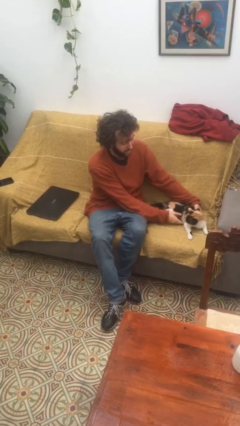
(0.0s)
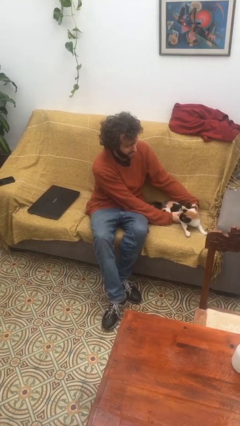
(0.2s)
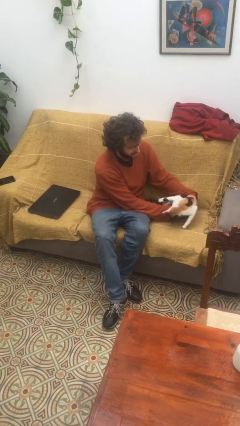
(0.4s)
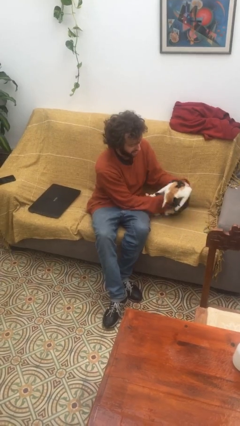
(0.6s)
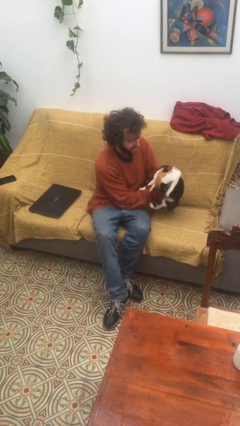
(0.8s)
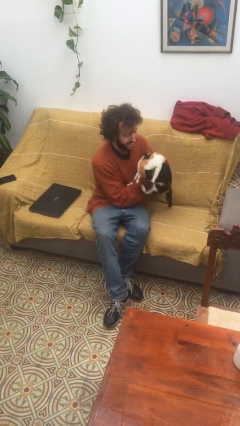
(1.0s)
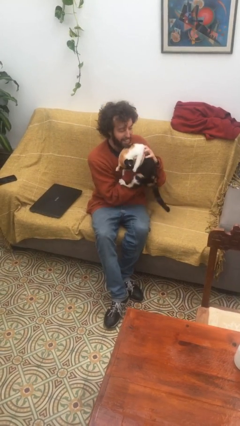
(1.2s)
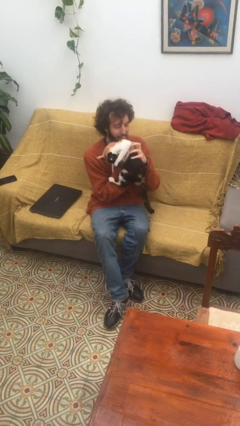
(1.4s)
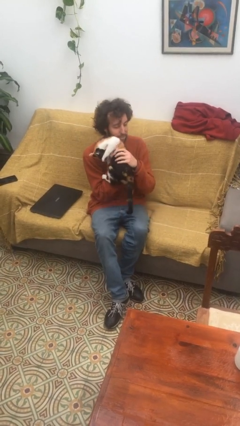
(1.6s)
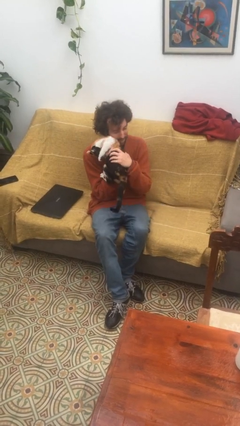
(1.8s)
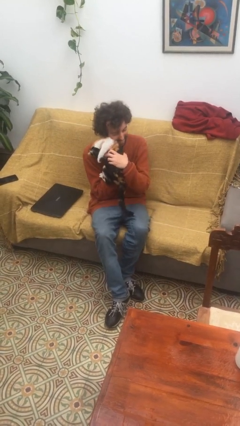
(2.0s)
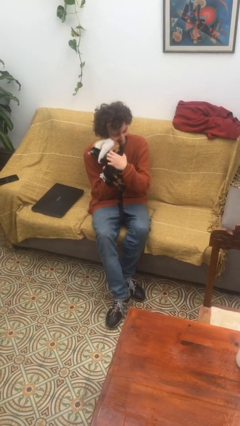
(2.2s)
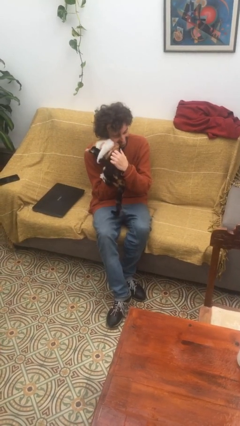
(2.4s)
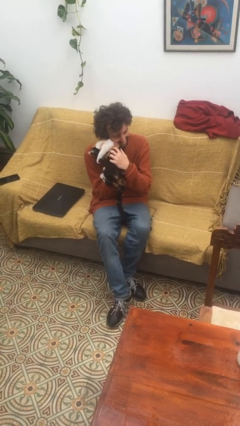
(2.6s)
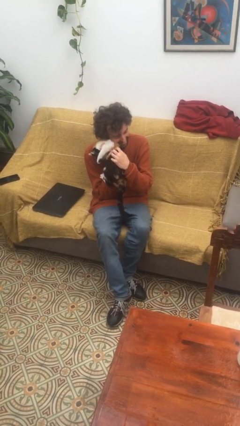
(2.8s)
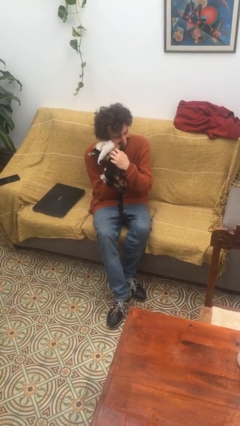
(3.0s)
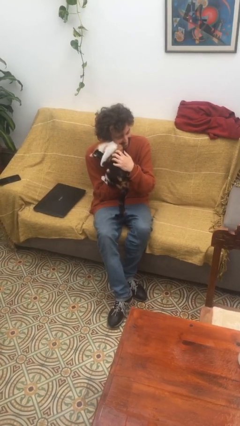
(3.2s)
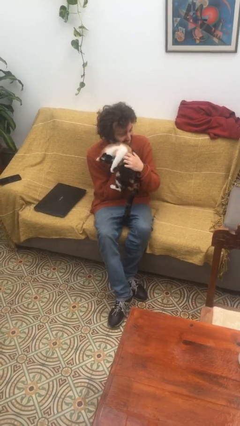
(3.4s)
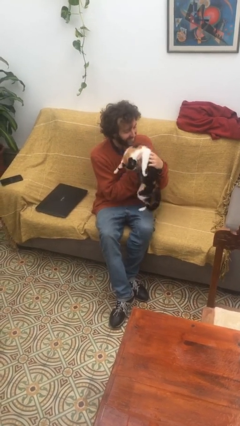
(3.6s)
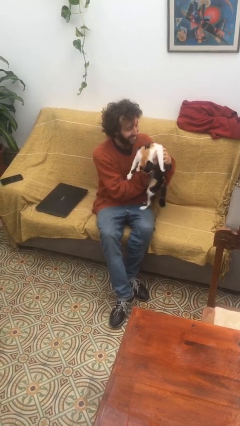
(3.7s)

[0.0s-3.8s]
person hugs cat

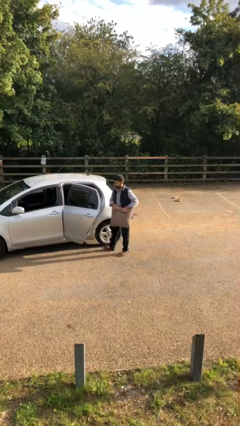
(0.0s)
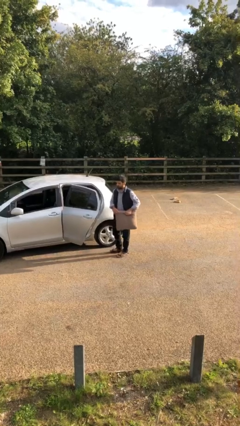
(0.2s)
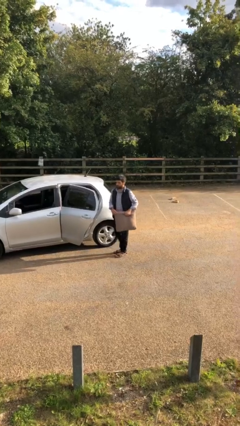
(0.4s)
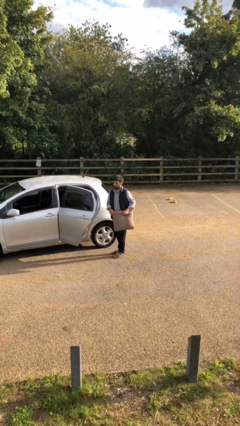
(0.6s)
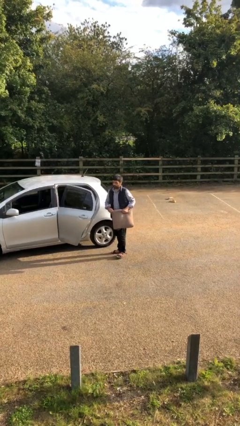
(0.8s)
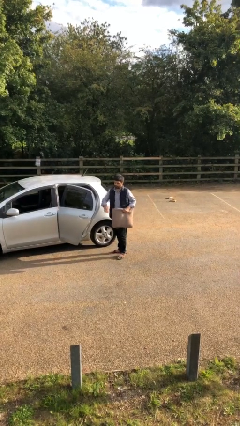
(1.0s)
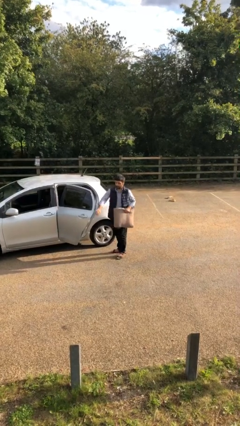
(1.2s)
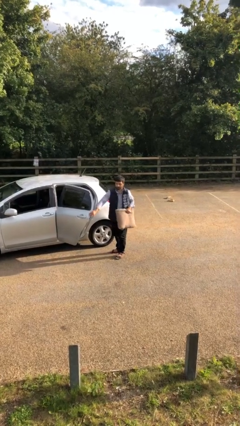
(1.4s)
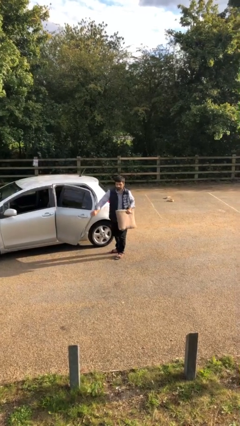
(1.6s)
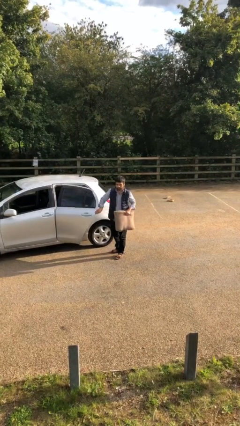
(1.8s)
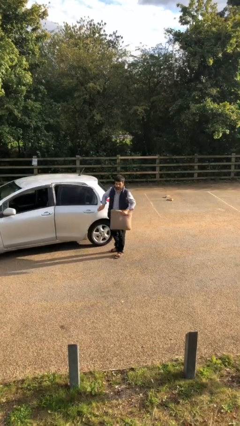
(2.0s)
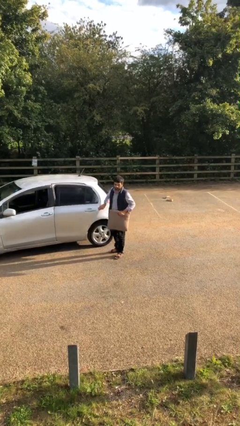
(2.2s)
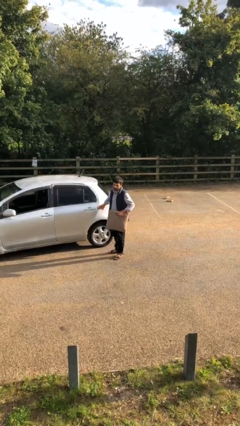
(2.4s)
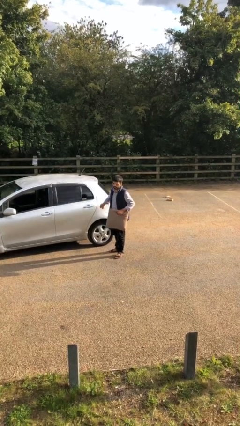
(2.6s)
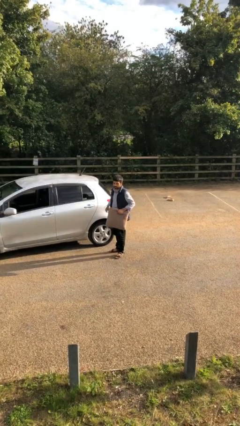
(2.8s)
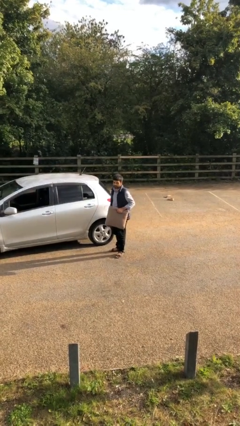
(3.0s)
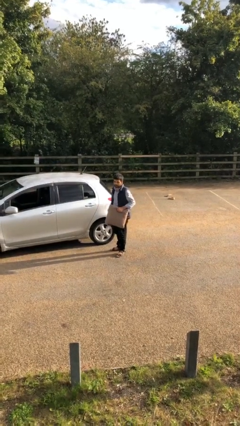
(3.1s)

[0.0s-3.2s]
person closes car door

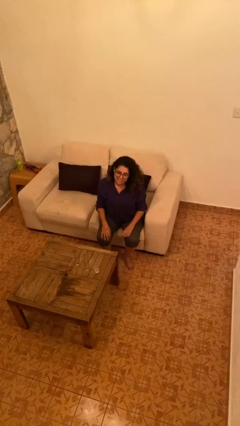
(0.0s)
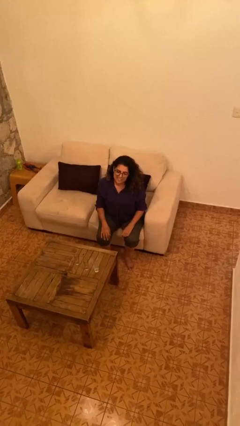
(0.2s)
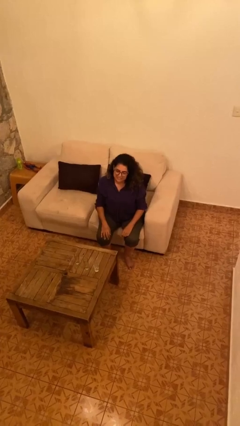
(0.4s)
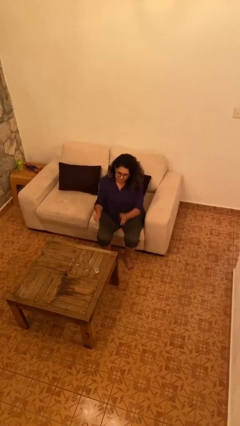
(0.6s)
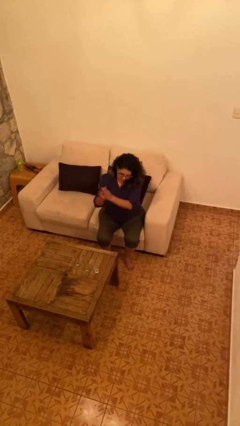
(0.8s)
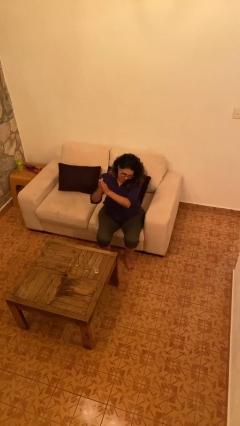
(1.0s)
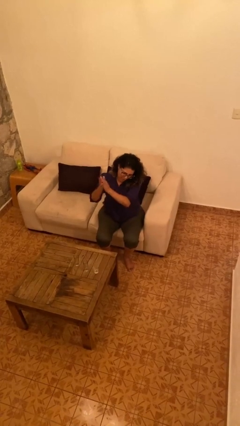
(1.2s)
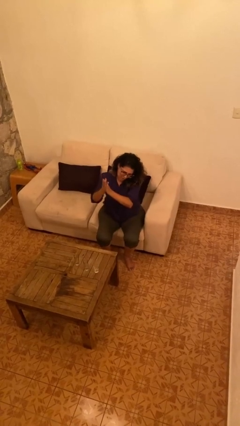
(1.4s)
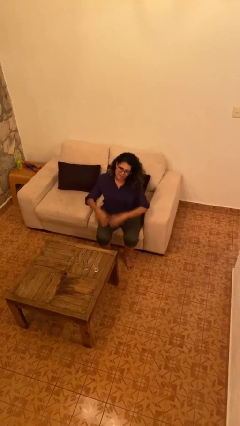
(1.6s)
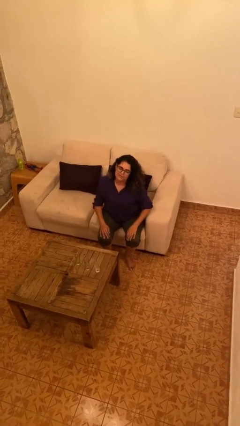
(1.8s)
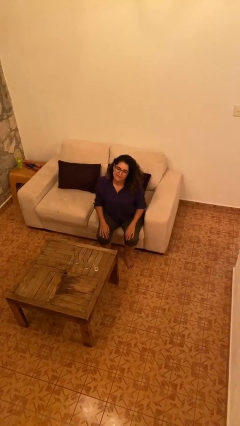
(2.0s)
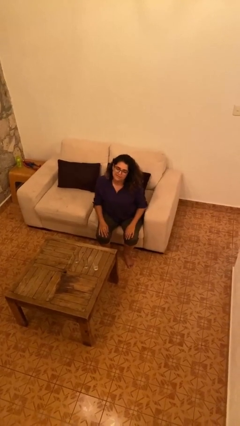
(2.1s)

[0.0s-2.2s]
person claps hands

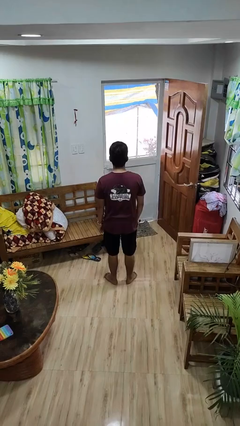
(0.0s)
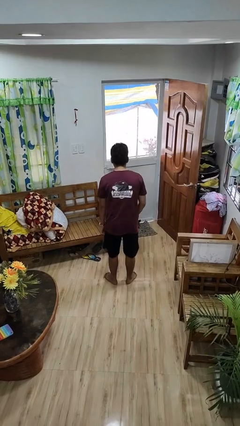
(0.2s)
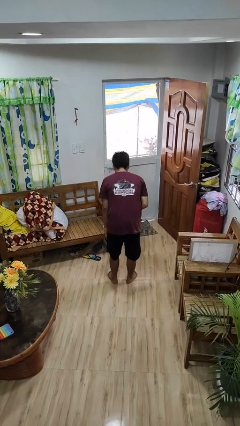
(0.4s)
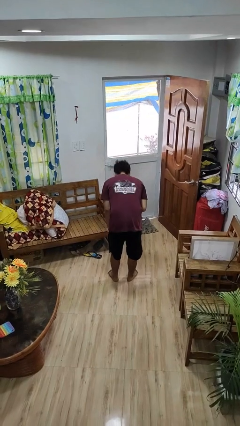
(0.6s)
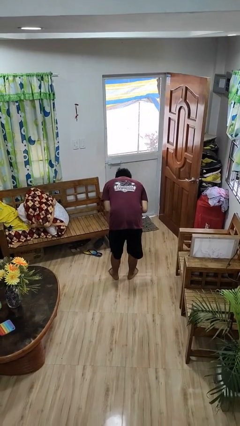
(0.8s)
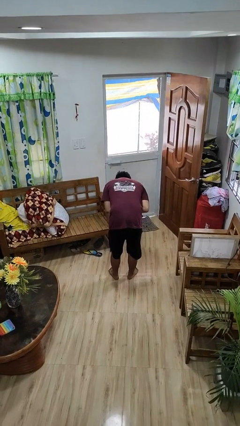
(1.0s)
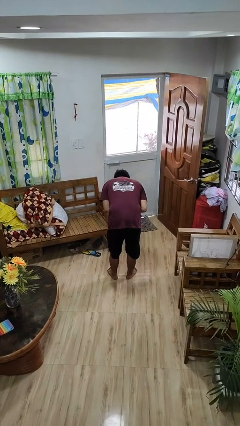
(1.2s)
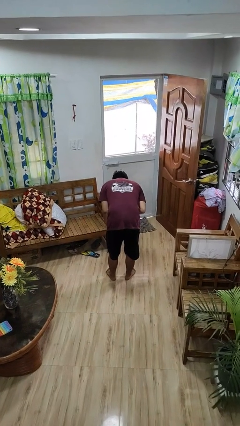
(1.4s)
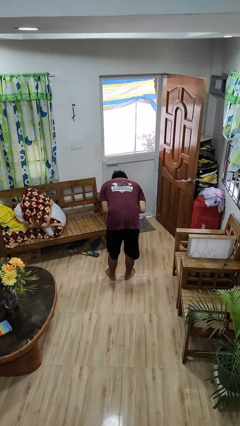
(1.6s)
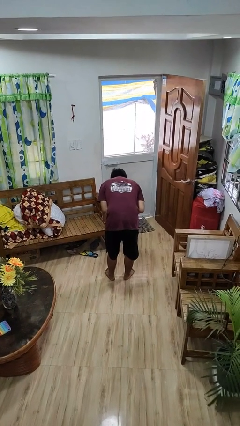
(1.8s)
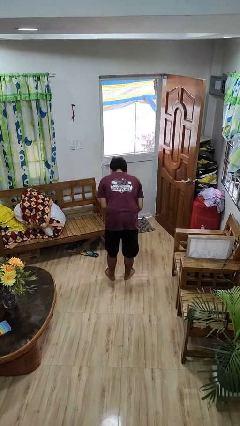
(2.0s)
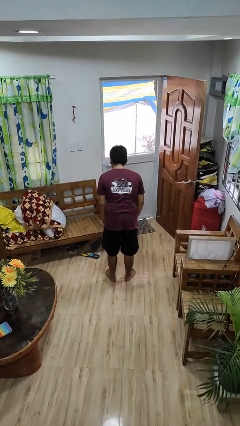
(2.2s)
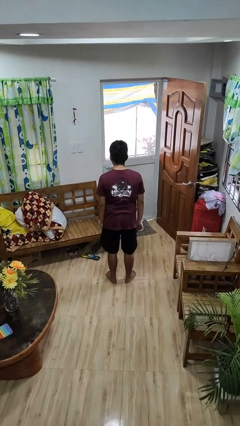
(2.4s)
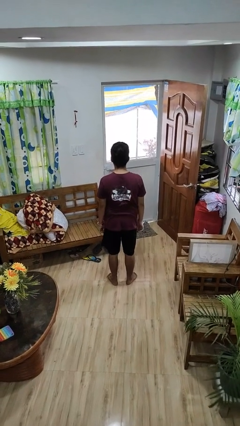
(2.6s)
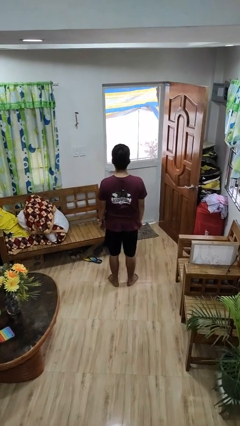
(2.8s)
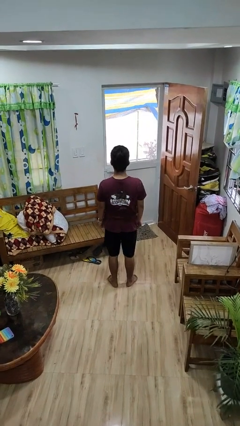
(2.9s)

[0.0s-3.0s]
person bows

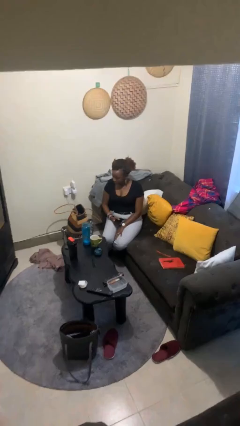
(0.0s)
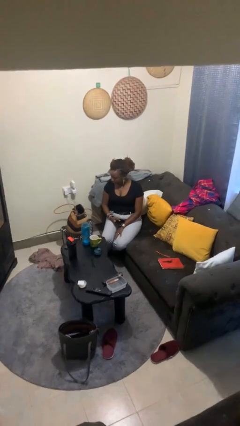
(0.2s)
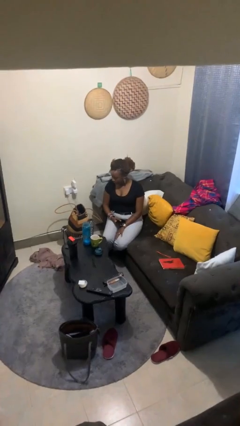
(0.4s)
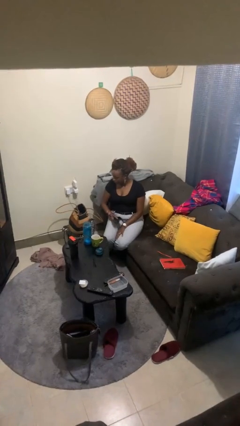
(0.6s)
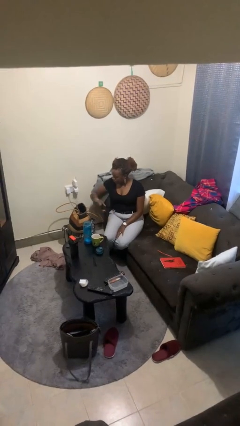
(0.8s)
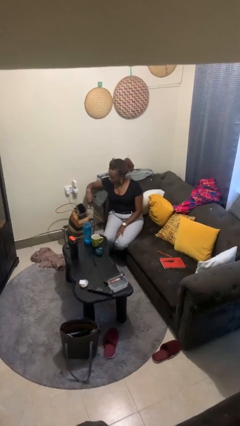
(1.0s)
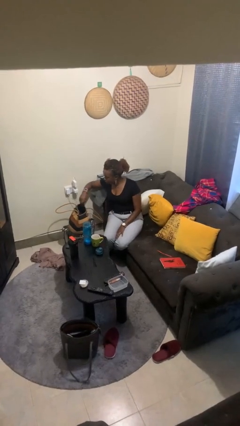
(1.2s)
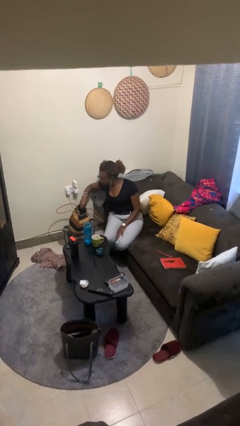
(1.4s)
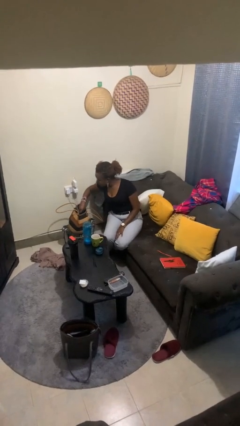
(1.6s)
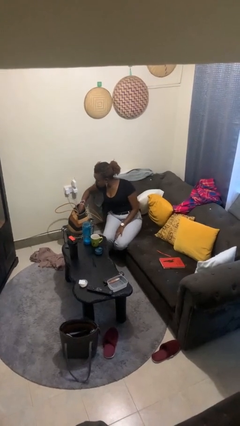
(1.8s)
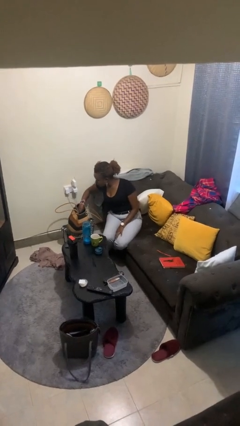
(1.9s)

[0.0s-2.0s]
person puts object into purse

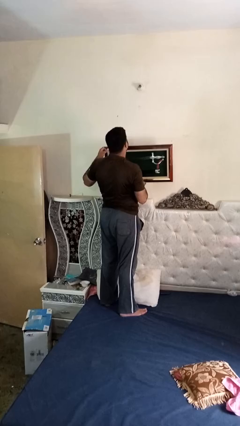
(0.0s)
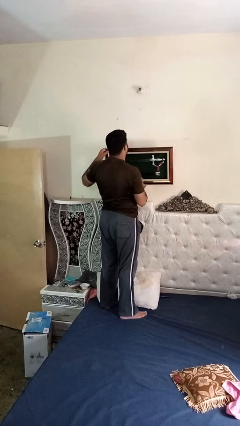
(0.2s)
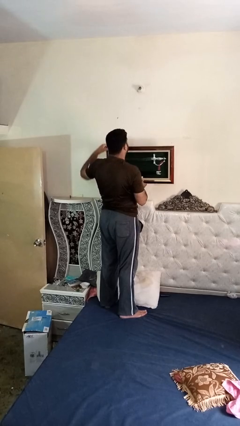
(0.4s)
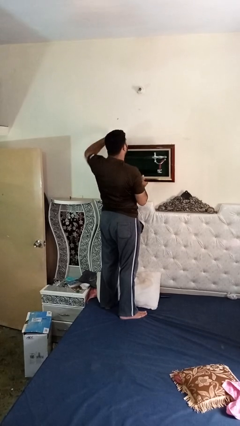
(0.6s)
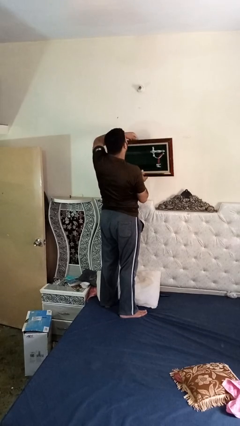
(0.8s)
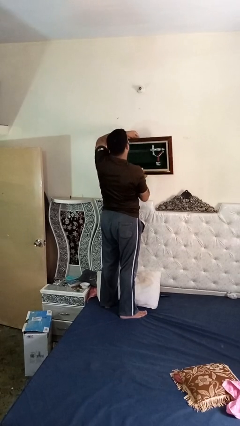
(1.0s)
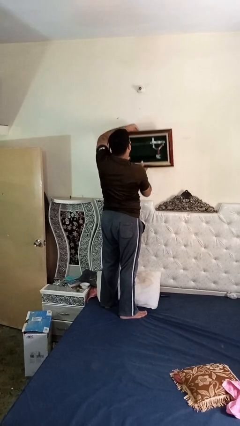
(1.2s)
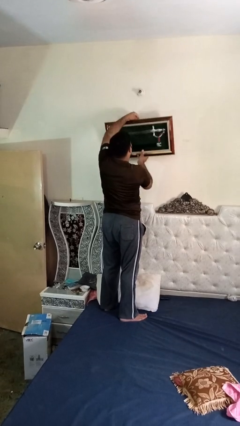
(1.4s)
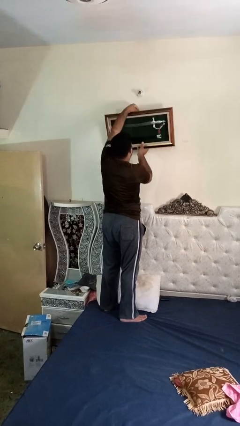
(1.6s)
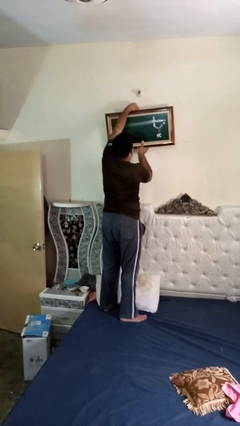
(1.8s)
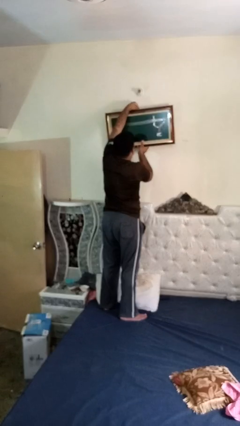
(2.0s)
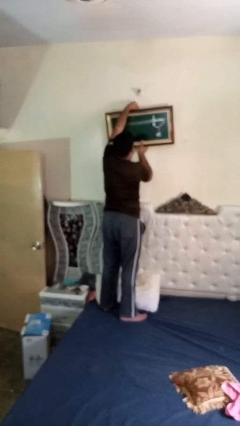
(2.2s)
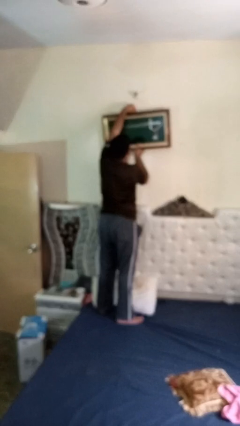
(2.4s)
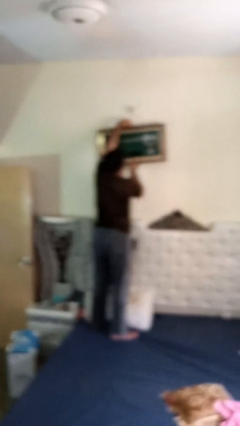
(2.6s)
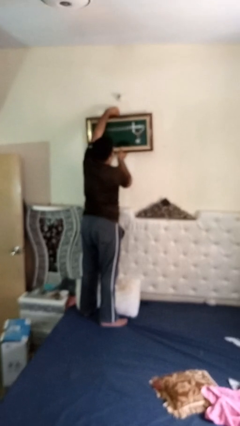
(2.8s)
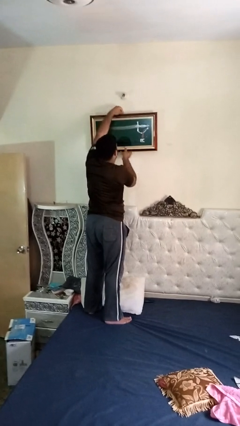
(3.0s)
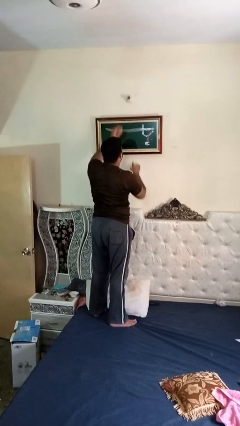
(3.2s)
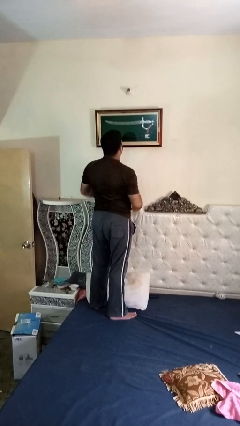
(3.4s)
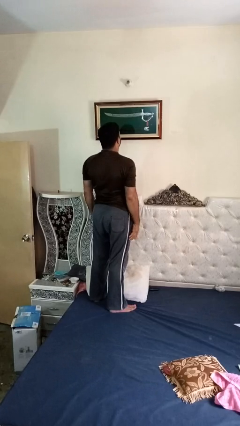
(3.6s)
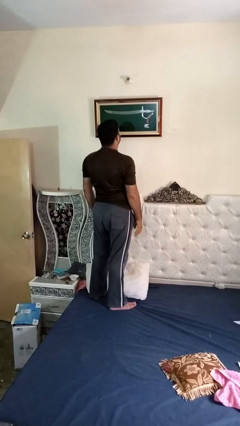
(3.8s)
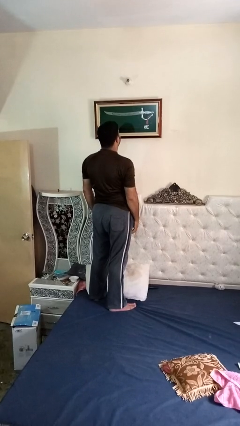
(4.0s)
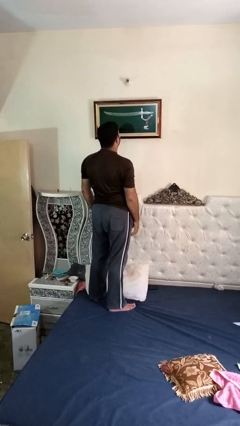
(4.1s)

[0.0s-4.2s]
person puts up picture frame
